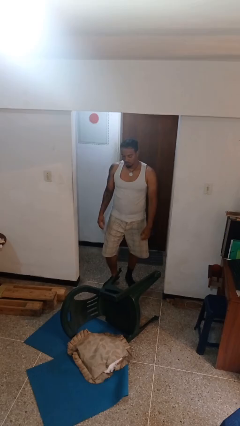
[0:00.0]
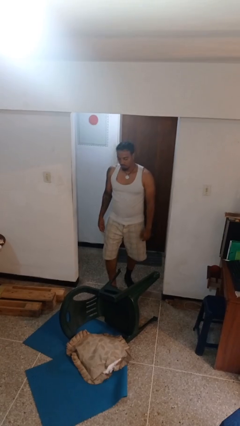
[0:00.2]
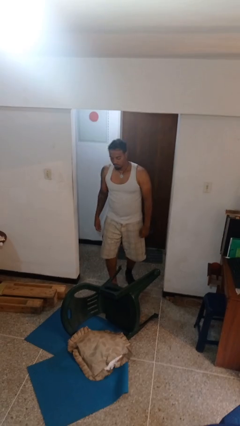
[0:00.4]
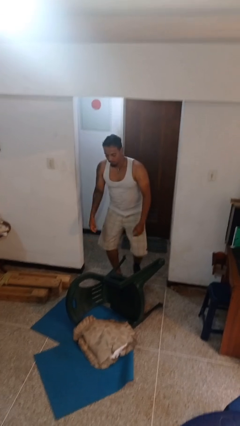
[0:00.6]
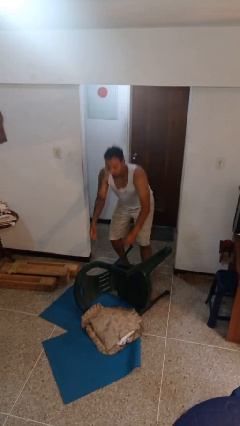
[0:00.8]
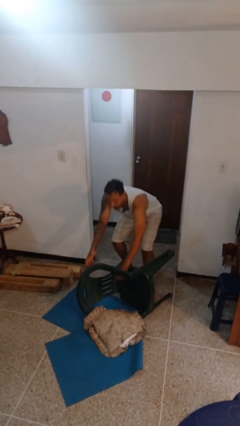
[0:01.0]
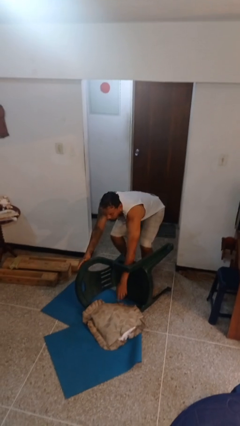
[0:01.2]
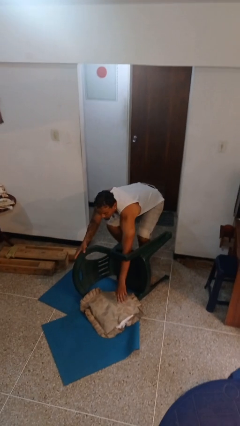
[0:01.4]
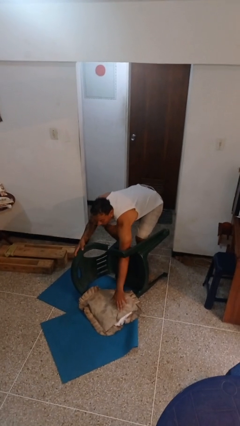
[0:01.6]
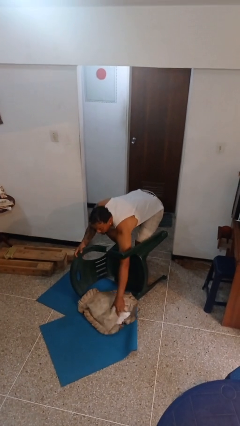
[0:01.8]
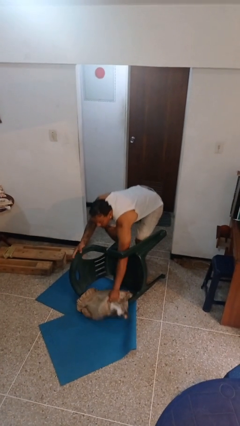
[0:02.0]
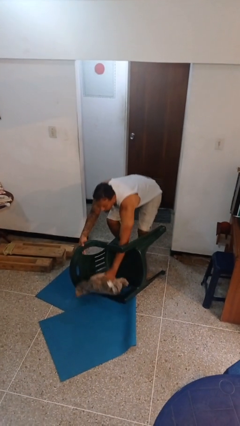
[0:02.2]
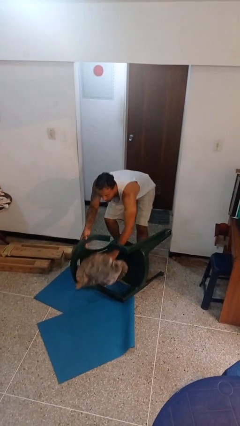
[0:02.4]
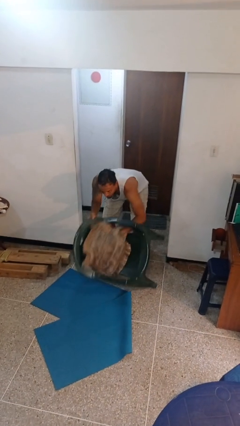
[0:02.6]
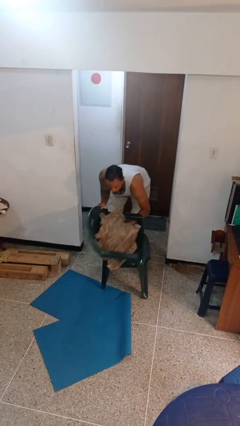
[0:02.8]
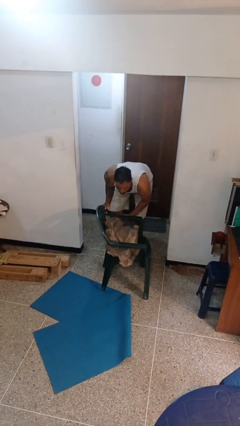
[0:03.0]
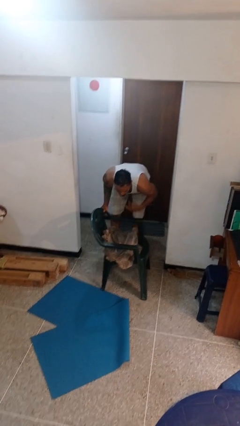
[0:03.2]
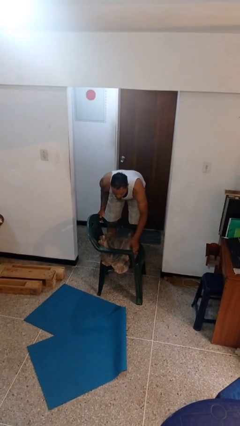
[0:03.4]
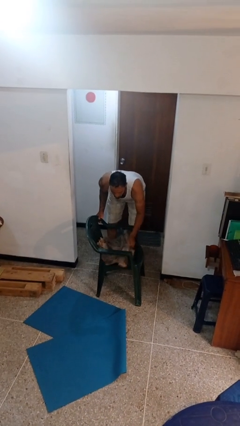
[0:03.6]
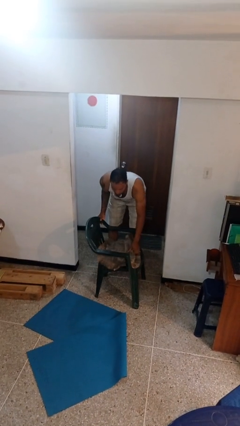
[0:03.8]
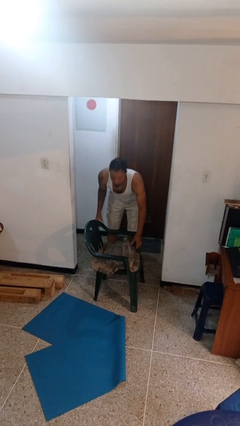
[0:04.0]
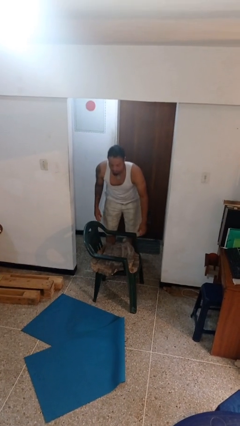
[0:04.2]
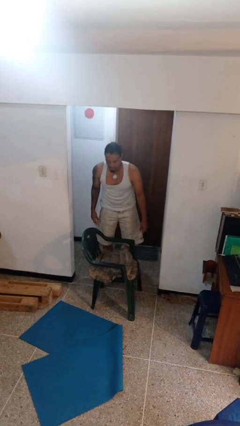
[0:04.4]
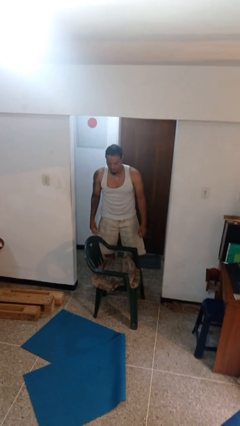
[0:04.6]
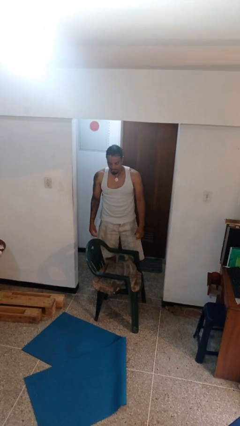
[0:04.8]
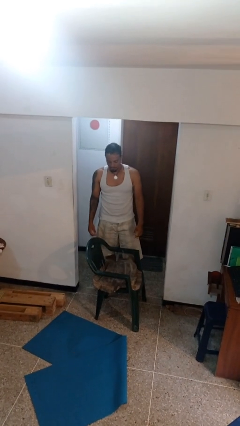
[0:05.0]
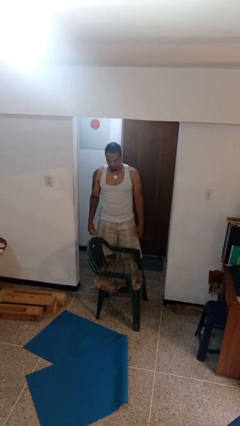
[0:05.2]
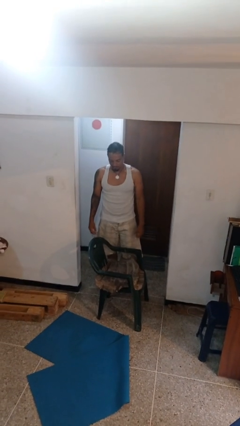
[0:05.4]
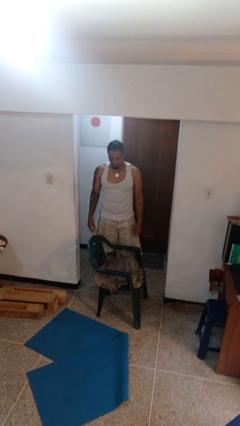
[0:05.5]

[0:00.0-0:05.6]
person sets upright furniture

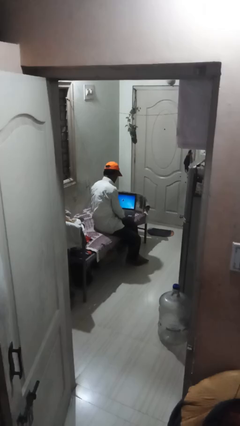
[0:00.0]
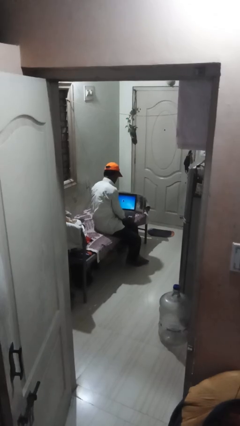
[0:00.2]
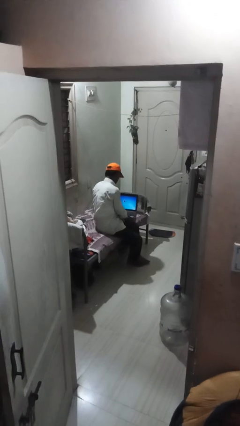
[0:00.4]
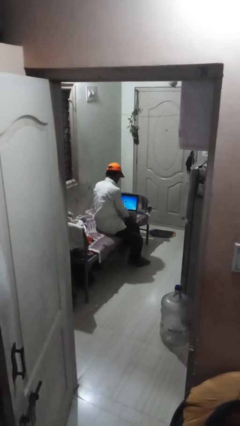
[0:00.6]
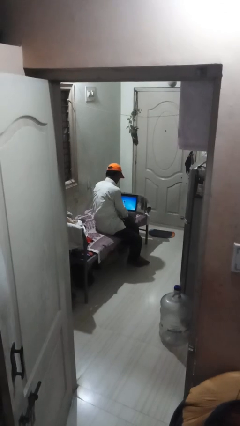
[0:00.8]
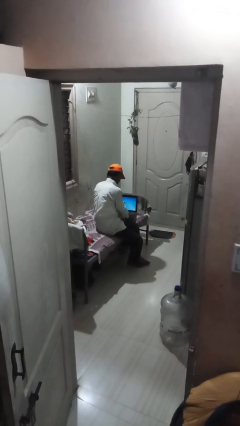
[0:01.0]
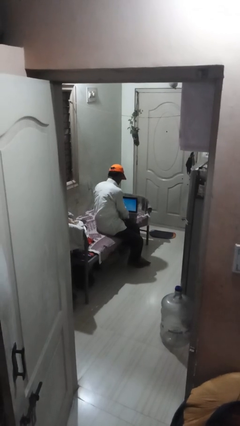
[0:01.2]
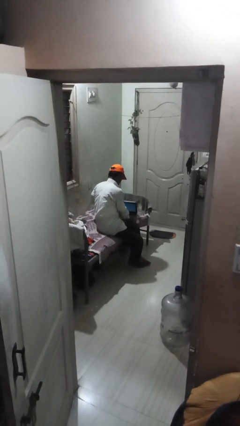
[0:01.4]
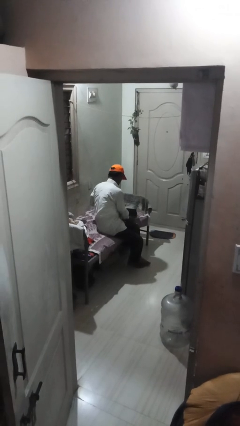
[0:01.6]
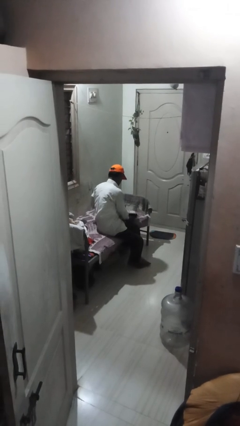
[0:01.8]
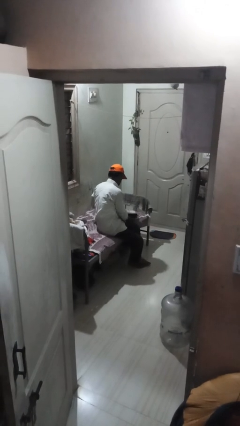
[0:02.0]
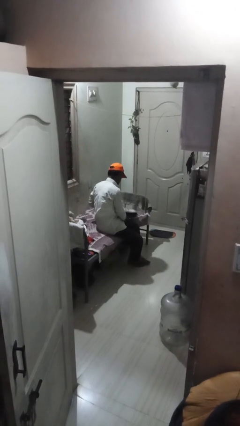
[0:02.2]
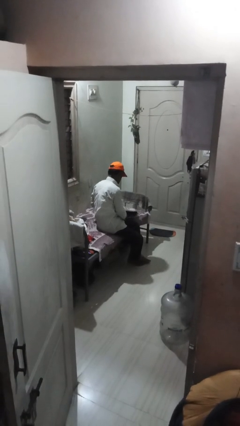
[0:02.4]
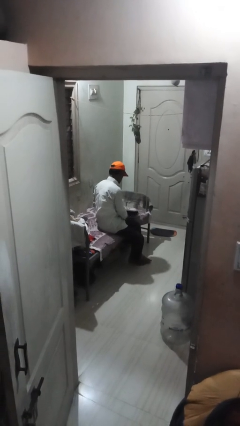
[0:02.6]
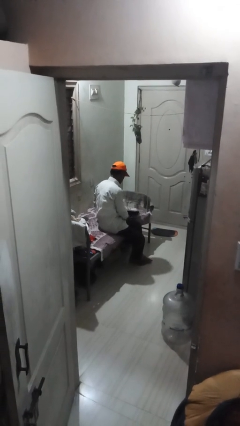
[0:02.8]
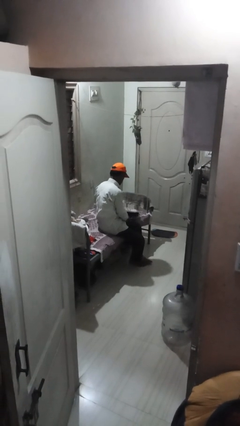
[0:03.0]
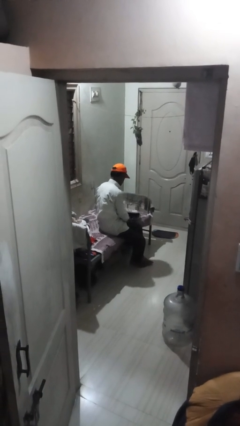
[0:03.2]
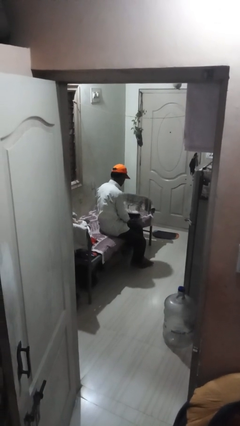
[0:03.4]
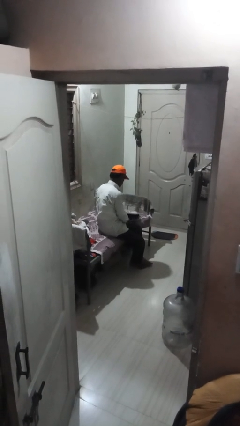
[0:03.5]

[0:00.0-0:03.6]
person closes laptop

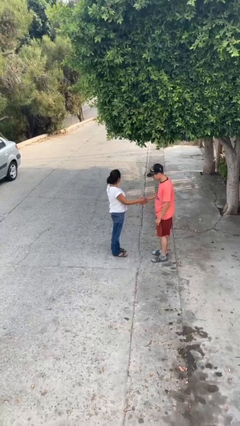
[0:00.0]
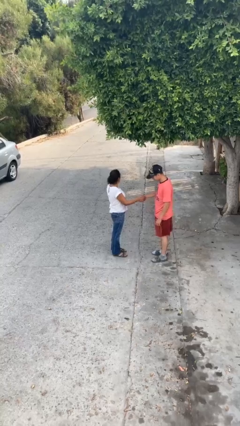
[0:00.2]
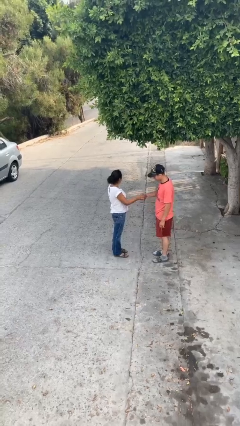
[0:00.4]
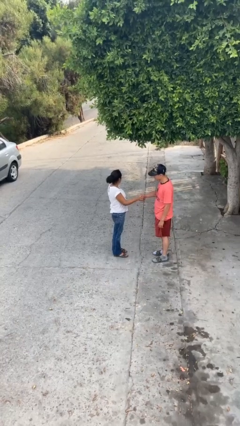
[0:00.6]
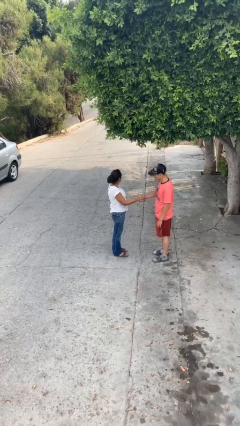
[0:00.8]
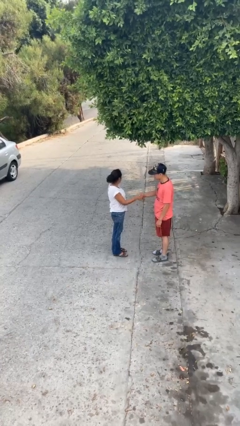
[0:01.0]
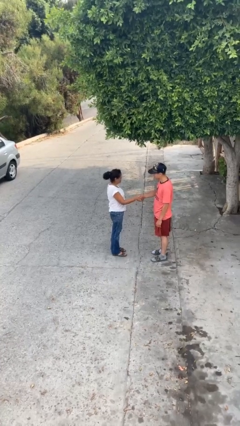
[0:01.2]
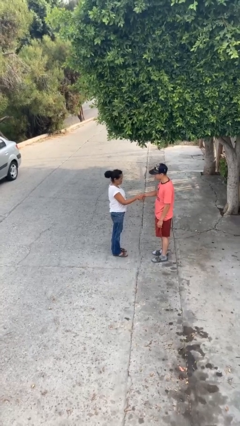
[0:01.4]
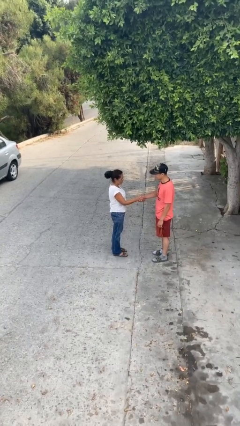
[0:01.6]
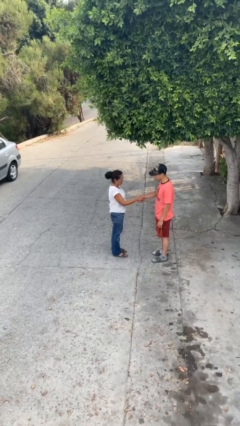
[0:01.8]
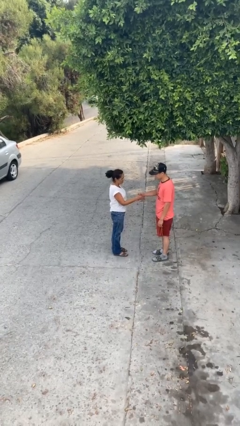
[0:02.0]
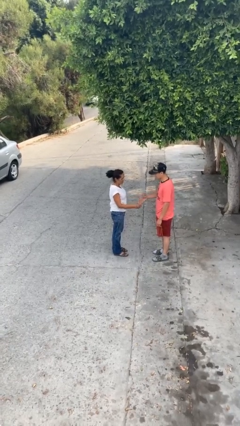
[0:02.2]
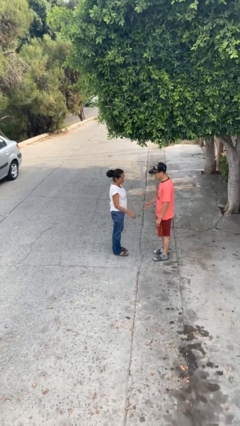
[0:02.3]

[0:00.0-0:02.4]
person shakes hand

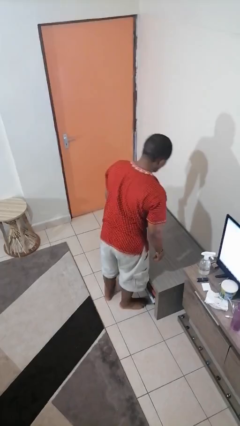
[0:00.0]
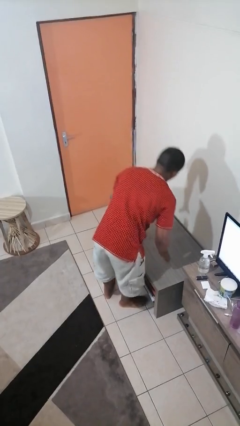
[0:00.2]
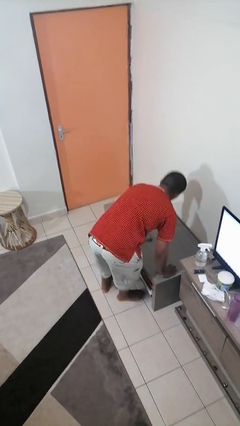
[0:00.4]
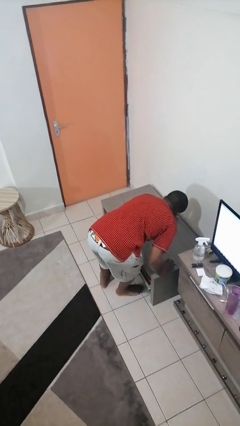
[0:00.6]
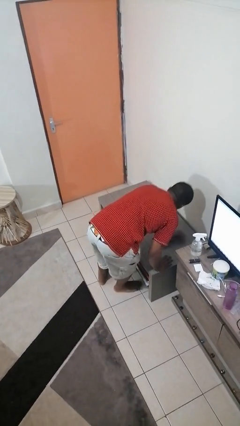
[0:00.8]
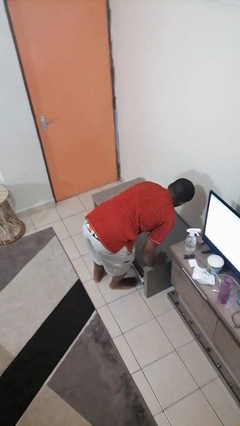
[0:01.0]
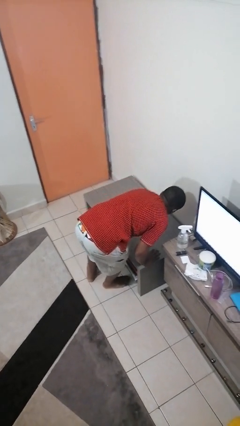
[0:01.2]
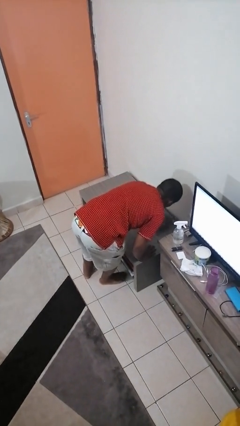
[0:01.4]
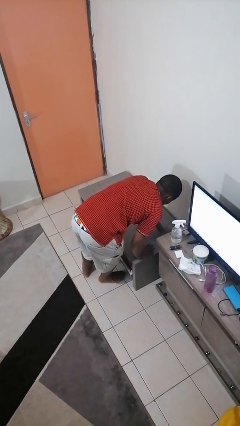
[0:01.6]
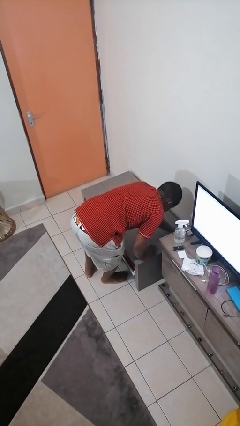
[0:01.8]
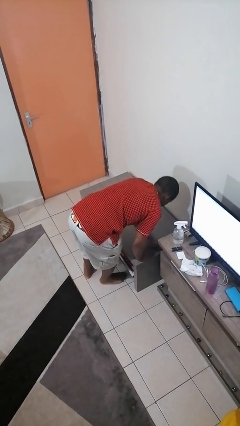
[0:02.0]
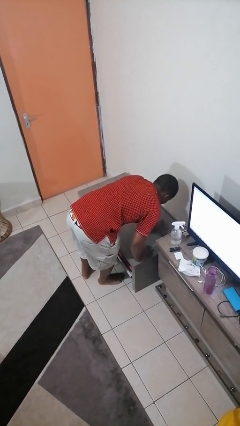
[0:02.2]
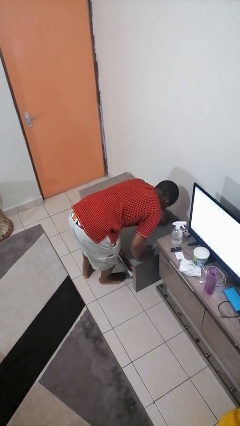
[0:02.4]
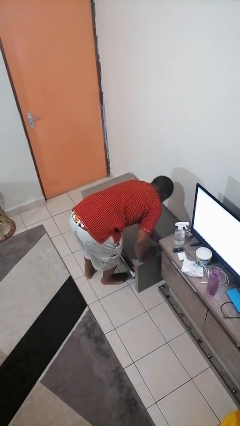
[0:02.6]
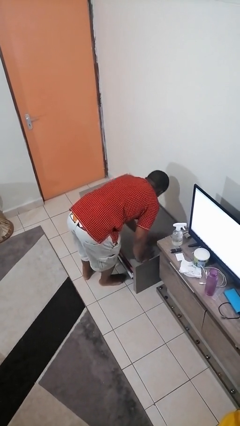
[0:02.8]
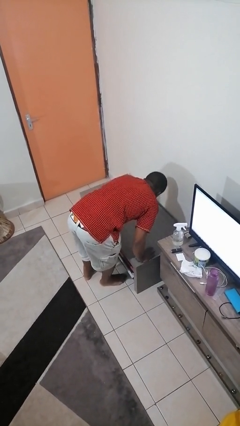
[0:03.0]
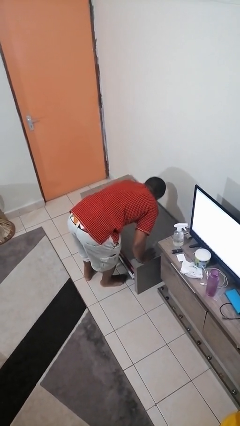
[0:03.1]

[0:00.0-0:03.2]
person cleans table with rag

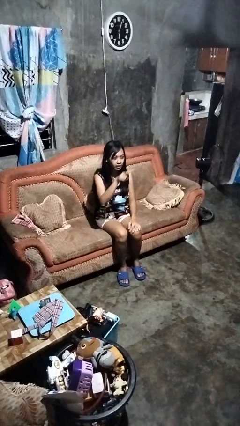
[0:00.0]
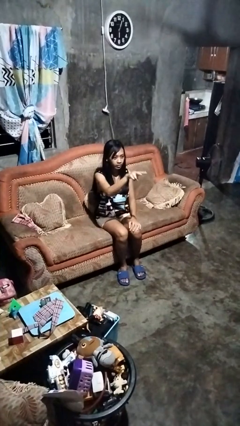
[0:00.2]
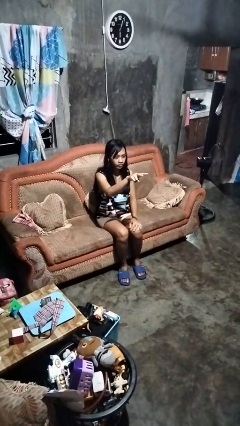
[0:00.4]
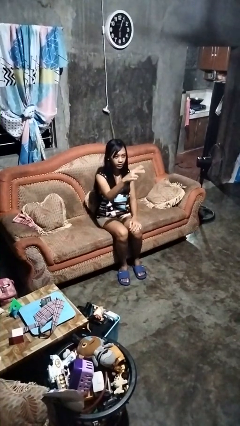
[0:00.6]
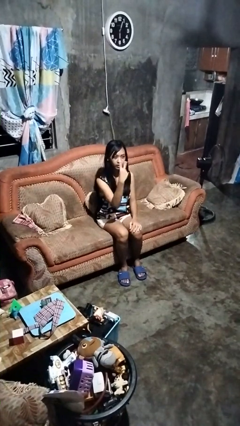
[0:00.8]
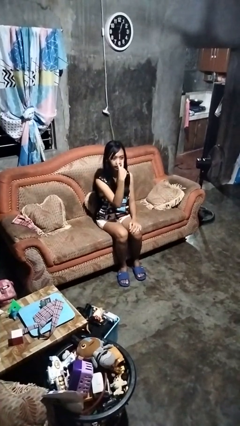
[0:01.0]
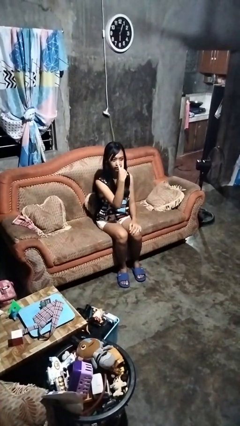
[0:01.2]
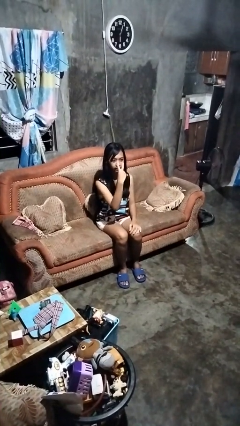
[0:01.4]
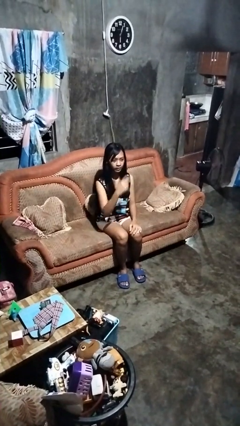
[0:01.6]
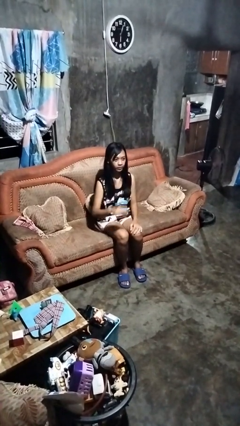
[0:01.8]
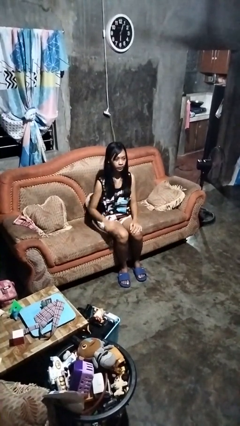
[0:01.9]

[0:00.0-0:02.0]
person gestures watch closely

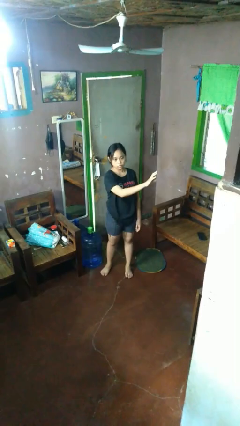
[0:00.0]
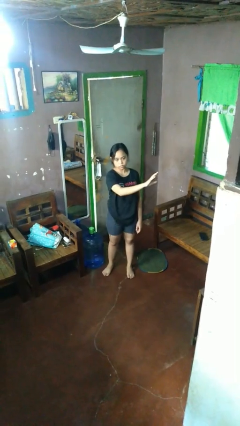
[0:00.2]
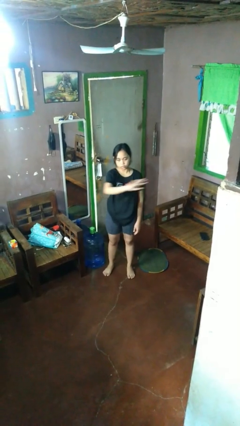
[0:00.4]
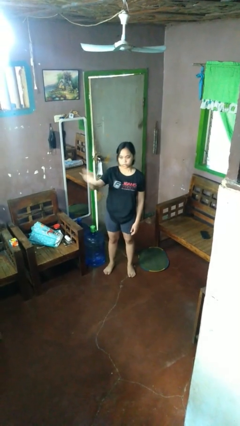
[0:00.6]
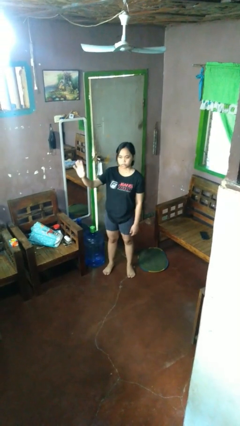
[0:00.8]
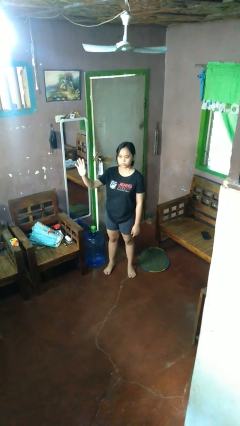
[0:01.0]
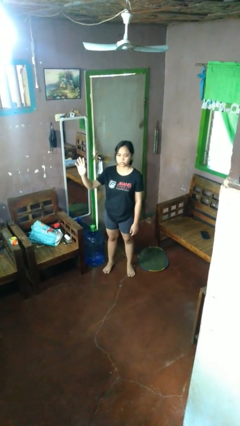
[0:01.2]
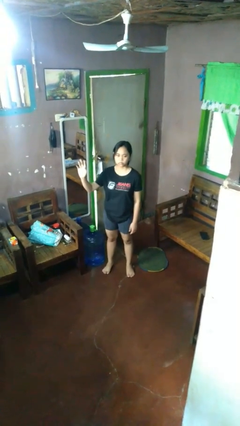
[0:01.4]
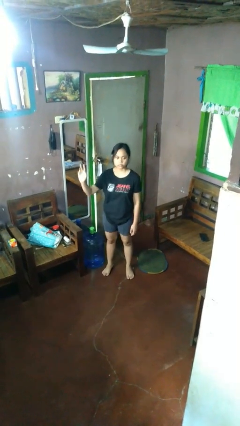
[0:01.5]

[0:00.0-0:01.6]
person gestures swipe right
